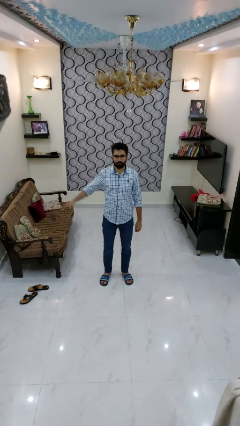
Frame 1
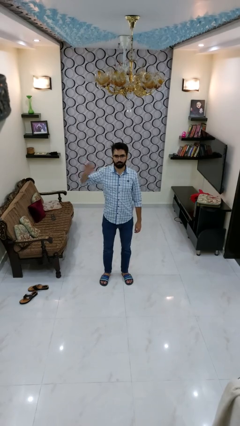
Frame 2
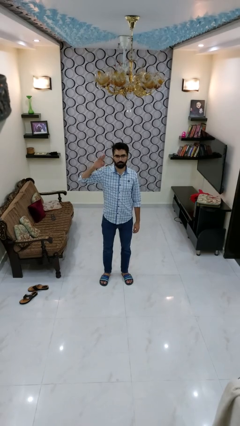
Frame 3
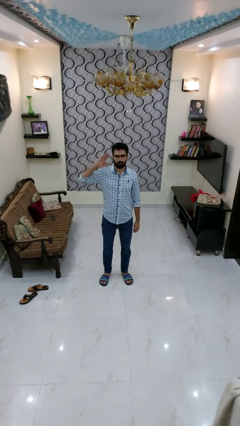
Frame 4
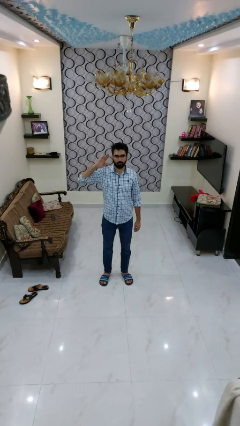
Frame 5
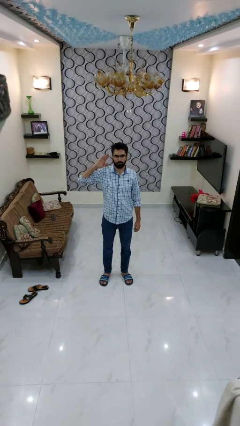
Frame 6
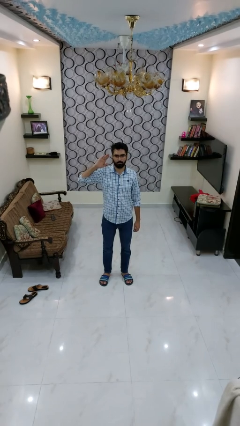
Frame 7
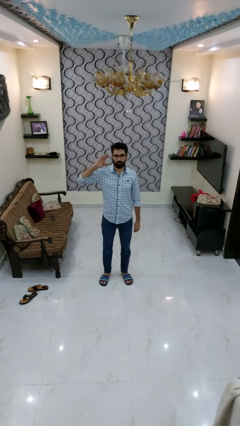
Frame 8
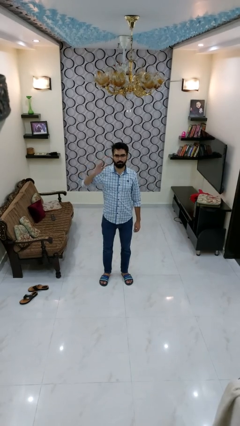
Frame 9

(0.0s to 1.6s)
person salutes

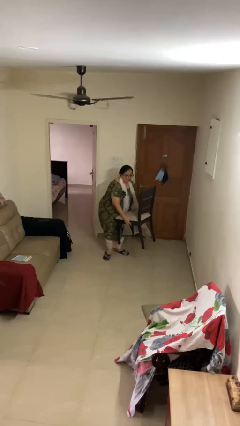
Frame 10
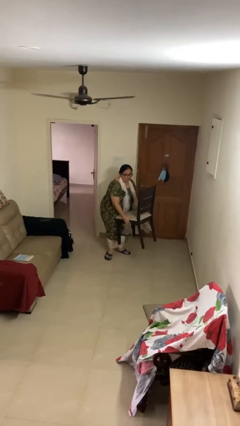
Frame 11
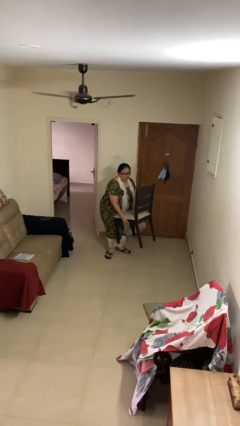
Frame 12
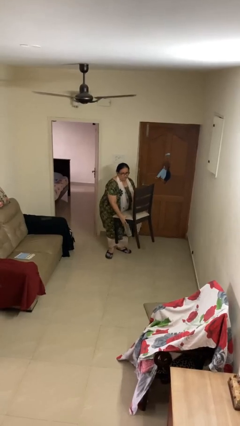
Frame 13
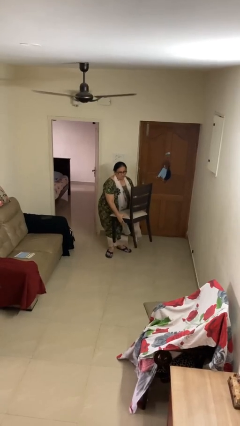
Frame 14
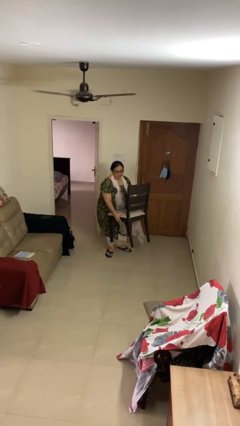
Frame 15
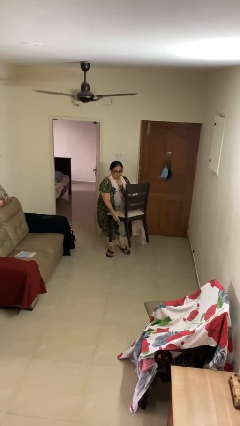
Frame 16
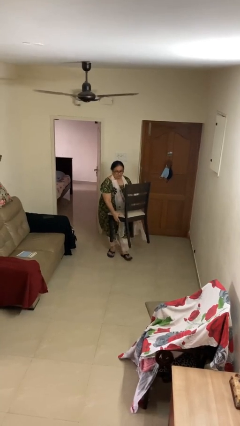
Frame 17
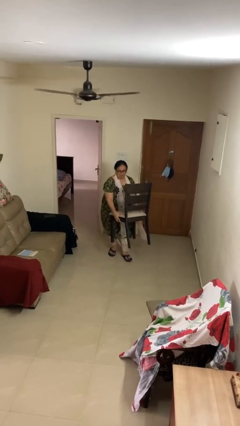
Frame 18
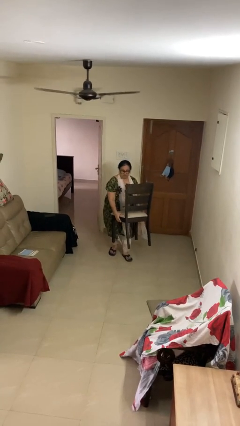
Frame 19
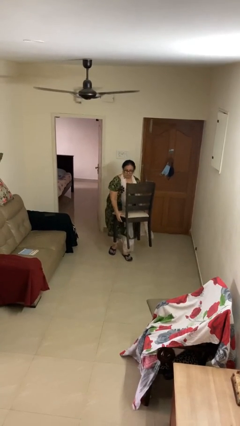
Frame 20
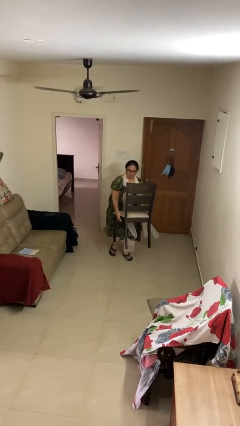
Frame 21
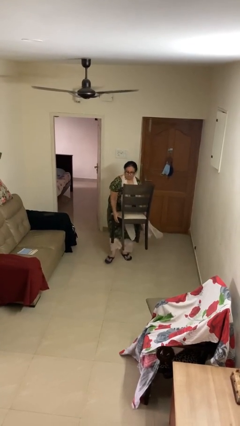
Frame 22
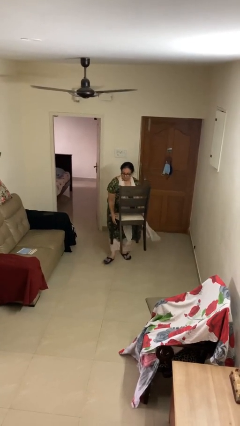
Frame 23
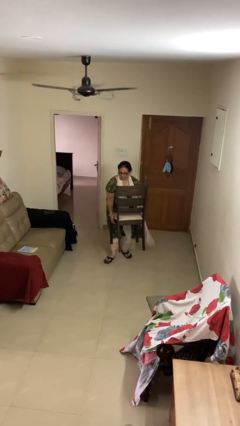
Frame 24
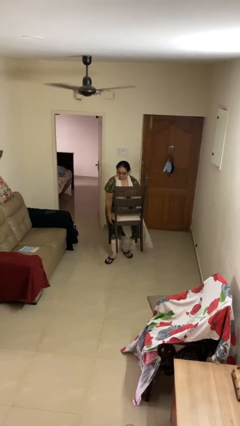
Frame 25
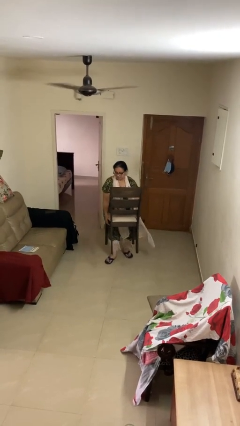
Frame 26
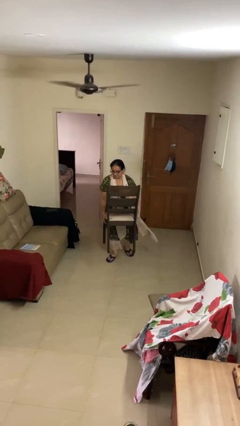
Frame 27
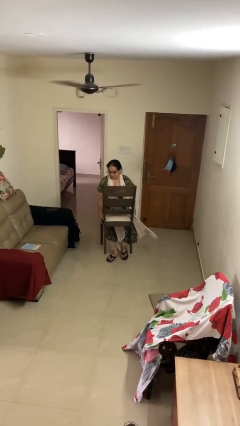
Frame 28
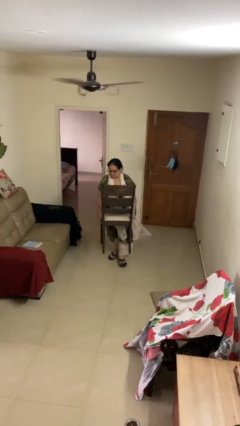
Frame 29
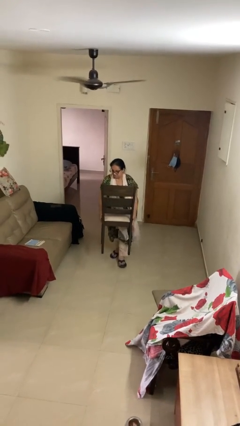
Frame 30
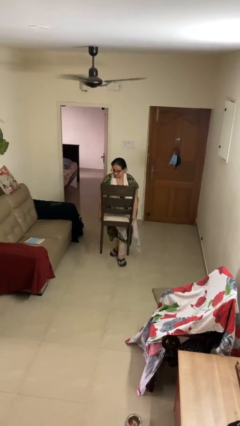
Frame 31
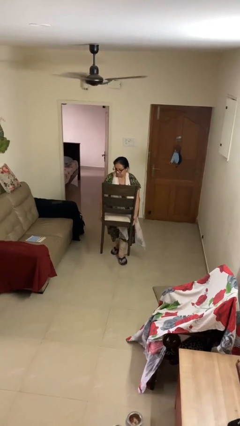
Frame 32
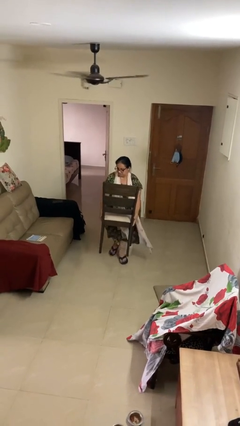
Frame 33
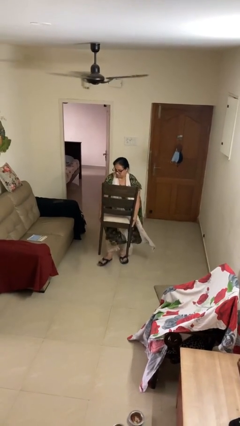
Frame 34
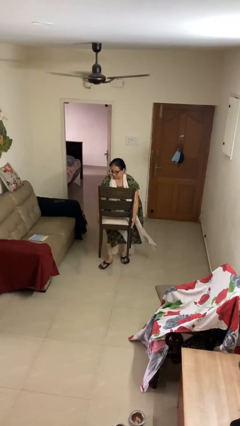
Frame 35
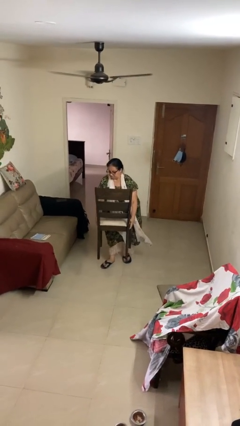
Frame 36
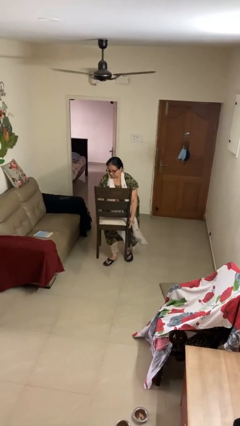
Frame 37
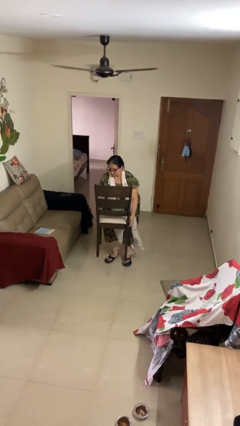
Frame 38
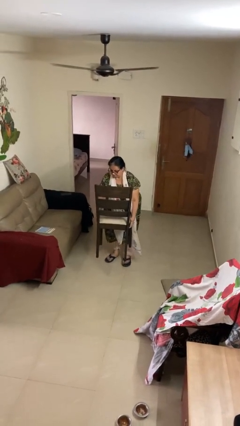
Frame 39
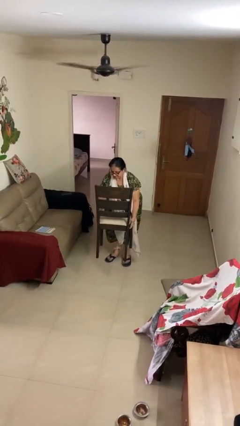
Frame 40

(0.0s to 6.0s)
person carries heavy object

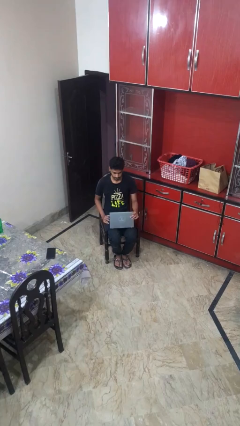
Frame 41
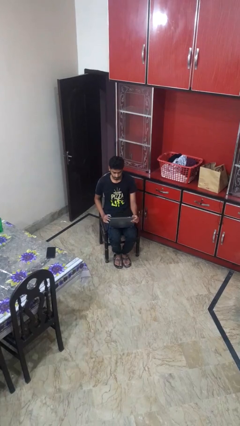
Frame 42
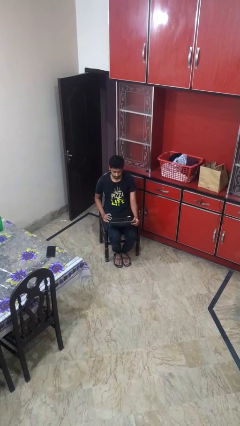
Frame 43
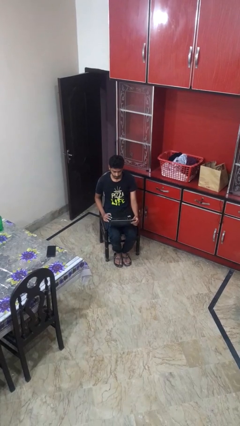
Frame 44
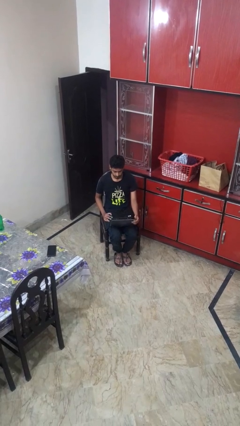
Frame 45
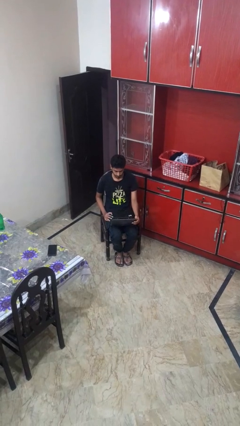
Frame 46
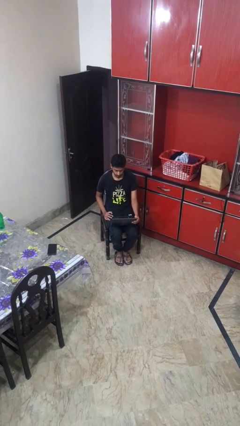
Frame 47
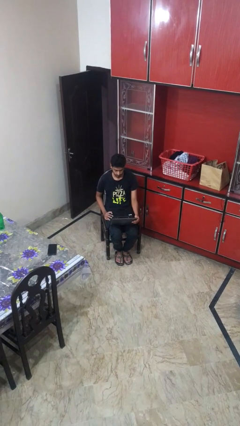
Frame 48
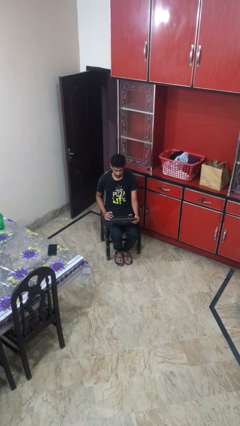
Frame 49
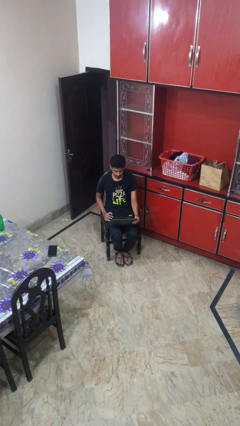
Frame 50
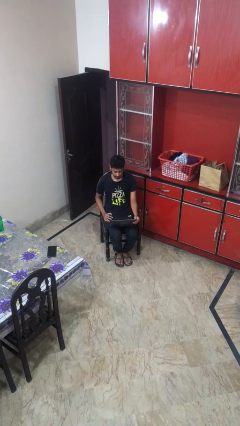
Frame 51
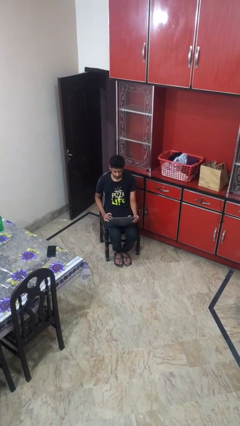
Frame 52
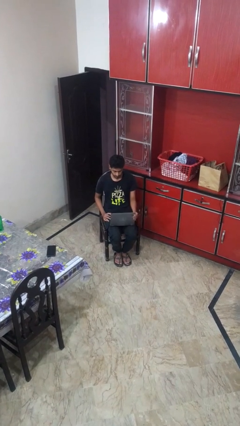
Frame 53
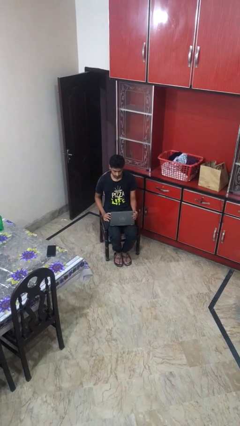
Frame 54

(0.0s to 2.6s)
person opens laptop

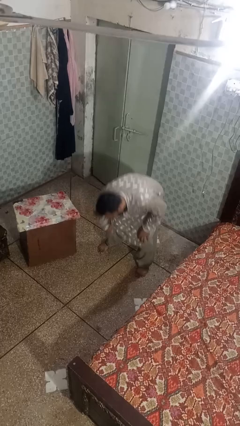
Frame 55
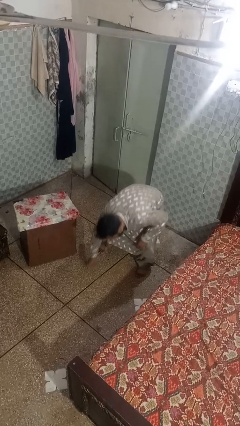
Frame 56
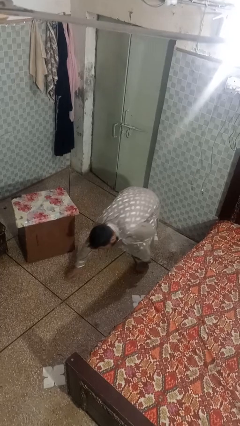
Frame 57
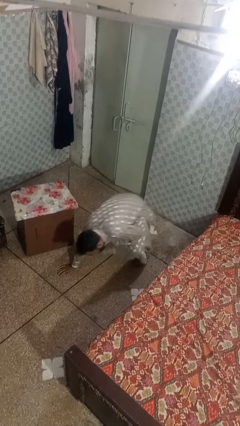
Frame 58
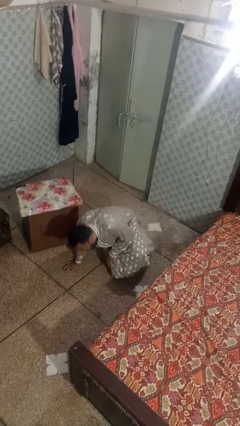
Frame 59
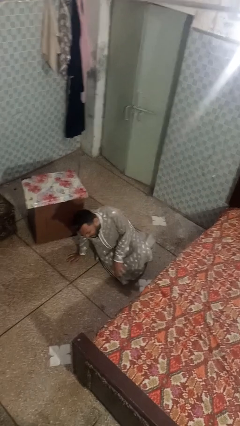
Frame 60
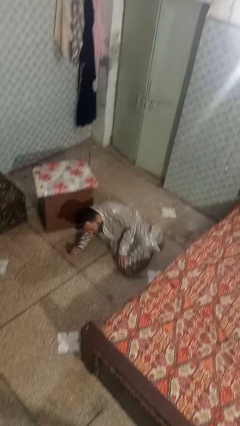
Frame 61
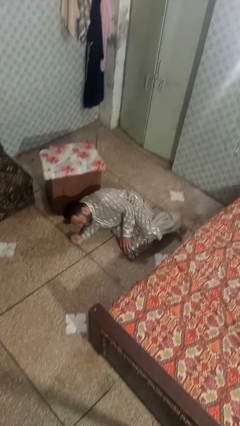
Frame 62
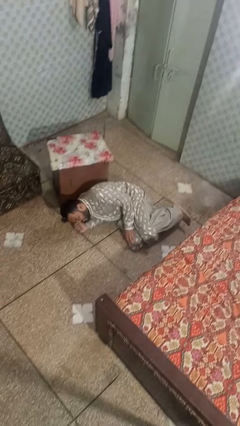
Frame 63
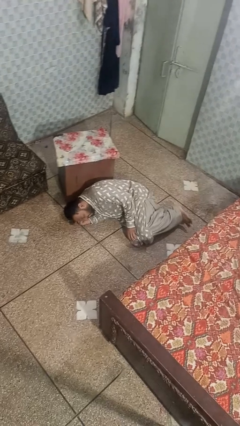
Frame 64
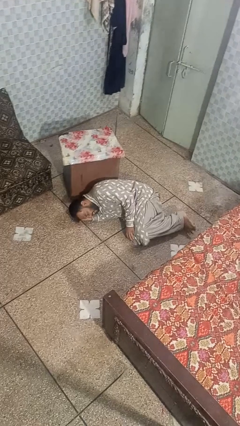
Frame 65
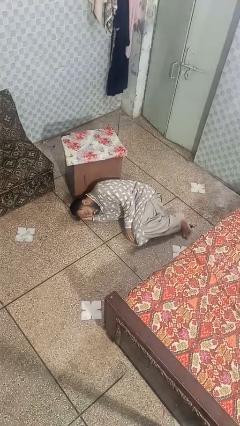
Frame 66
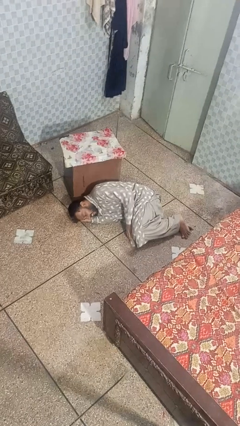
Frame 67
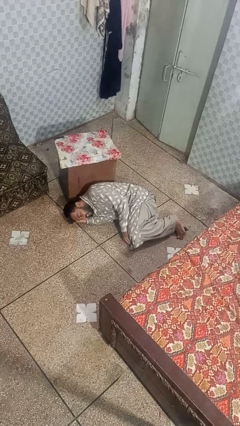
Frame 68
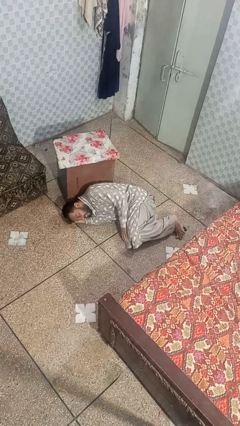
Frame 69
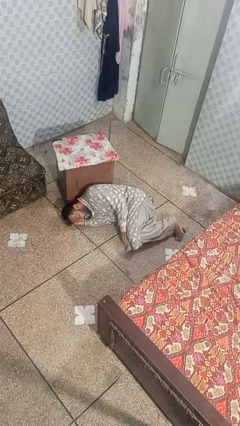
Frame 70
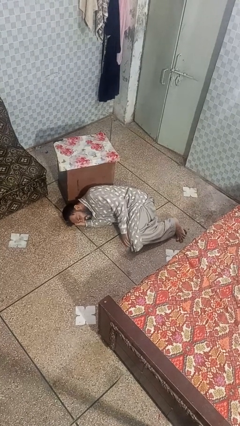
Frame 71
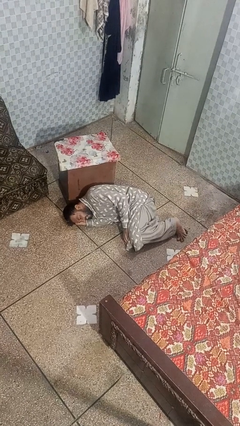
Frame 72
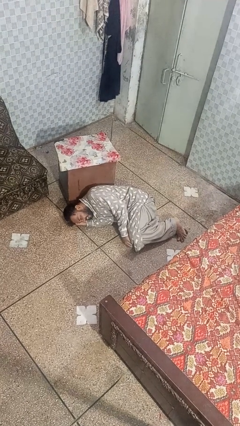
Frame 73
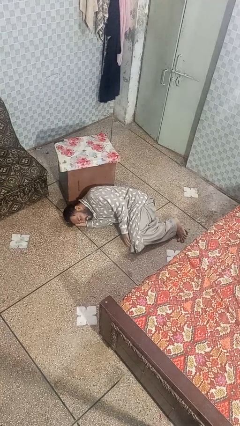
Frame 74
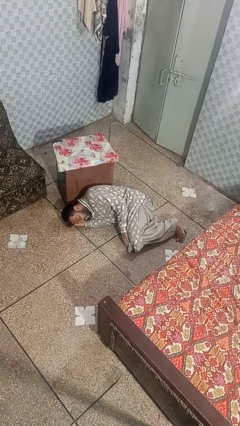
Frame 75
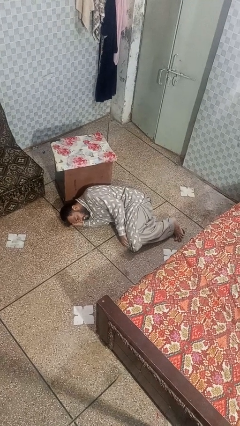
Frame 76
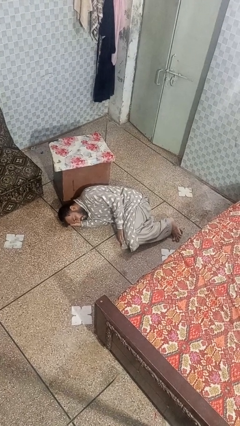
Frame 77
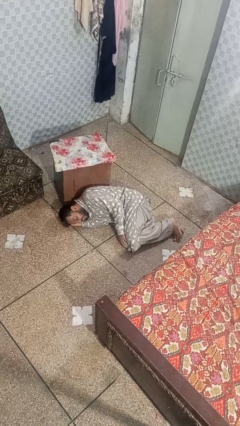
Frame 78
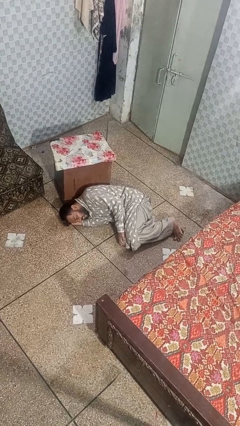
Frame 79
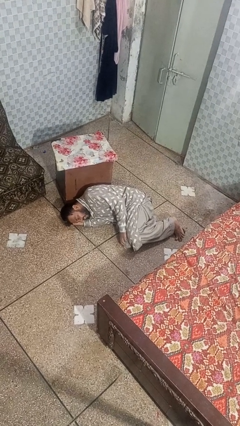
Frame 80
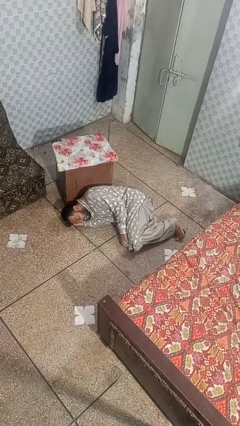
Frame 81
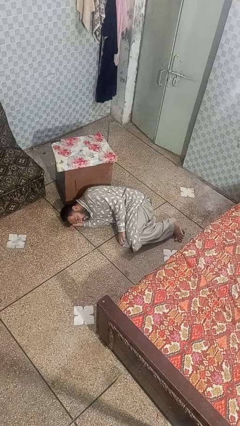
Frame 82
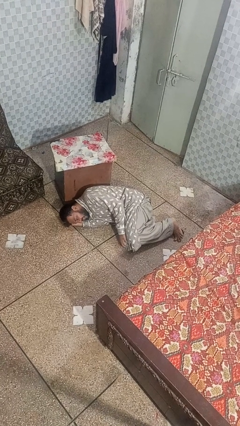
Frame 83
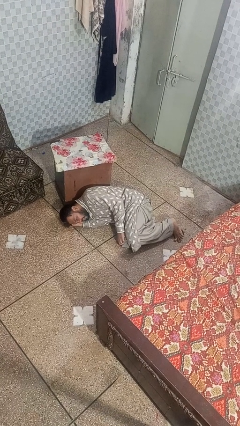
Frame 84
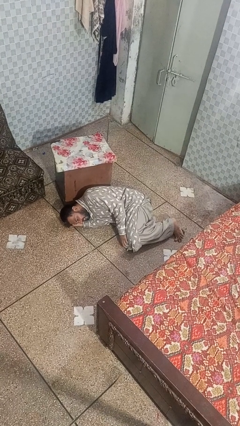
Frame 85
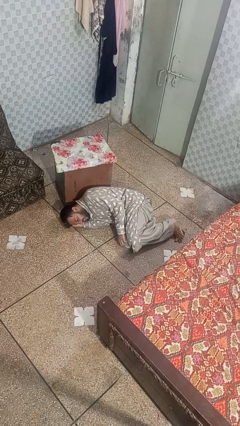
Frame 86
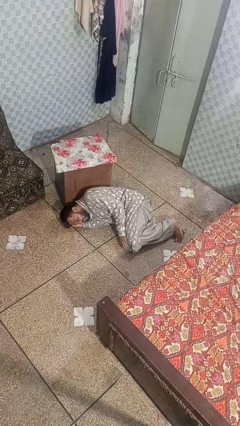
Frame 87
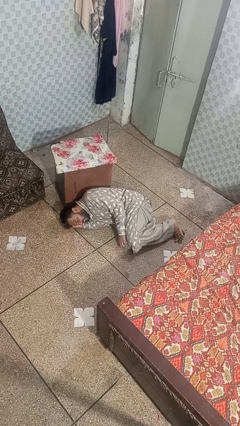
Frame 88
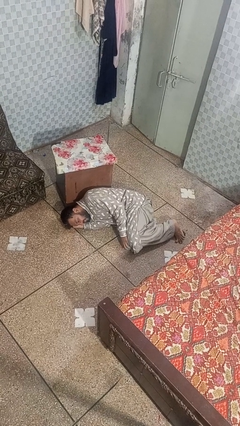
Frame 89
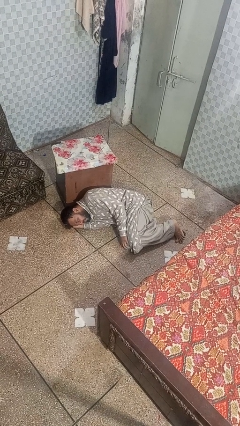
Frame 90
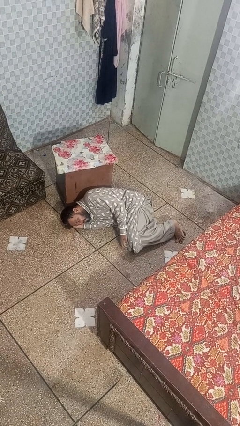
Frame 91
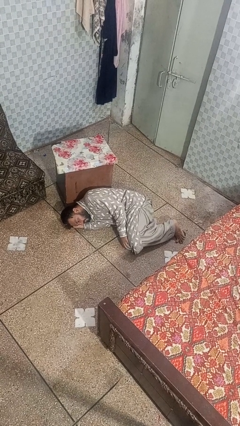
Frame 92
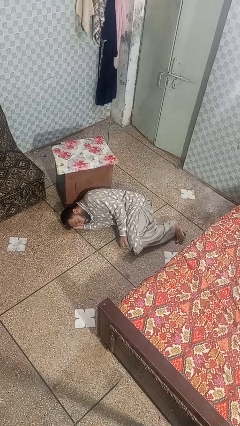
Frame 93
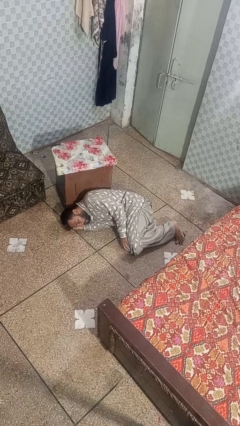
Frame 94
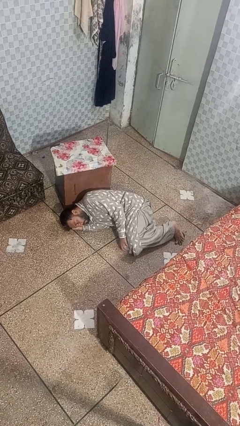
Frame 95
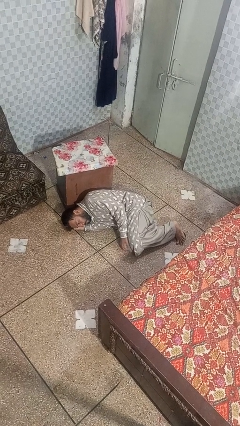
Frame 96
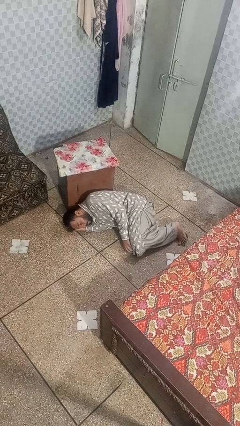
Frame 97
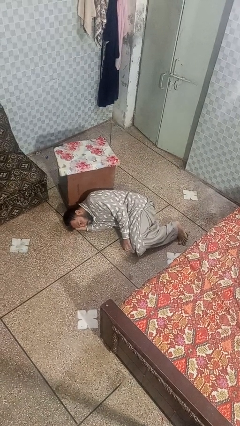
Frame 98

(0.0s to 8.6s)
person lies down on floor
